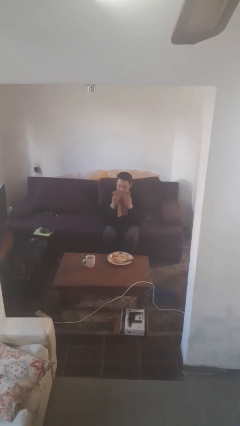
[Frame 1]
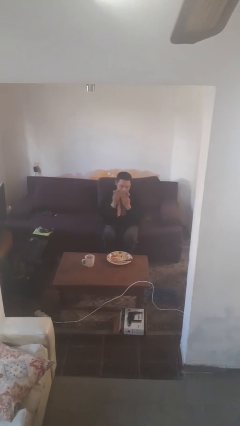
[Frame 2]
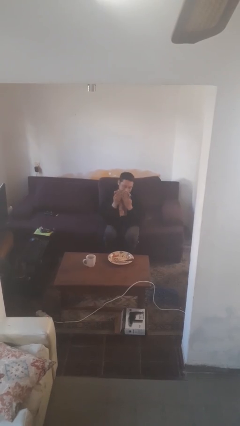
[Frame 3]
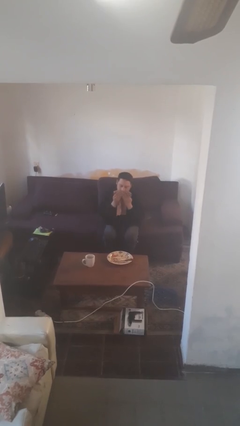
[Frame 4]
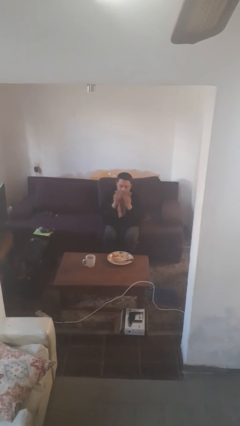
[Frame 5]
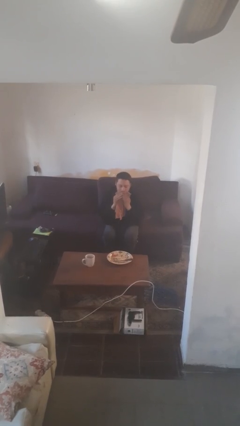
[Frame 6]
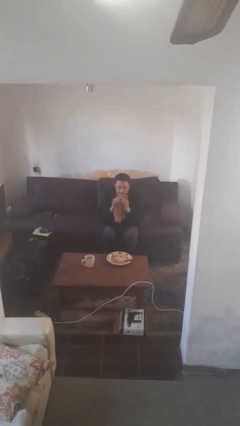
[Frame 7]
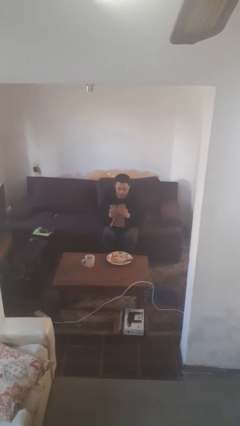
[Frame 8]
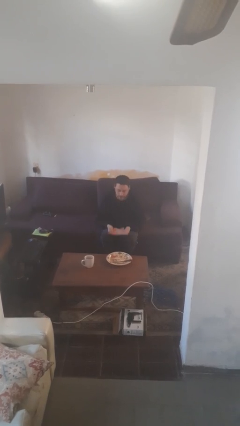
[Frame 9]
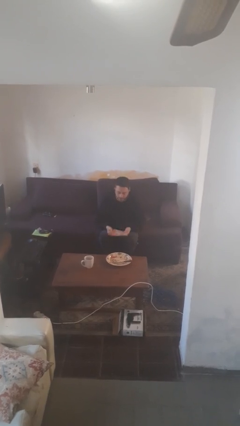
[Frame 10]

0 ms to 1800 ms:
person wipes mouth with napkin

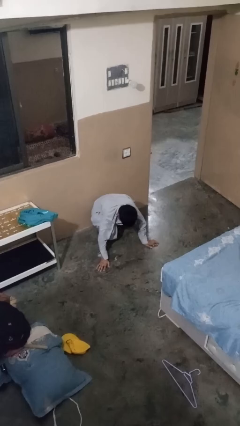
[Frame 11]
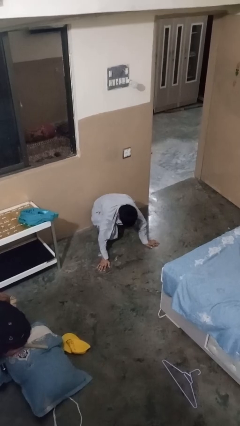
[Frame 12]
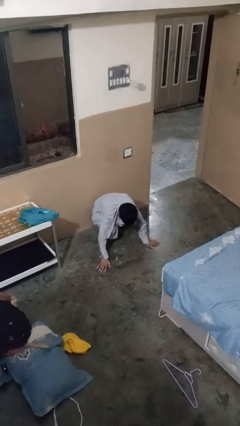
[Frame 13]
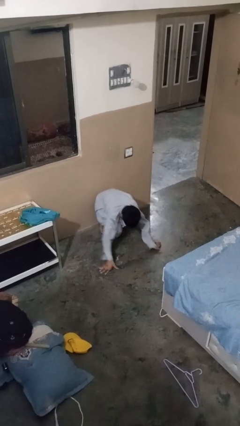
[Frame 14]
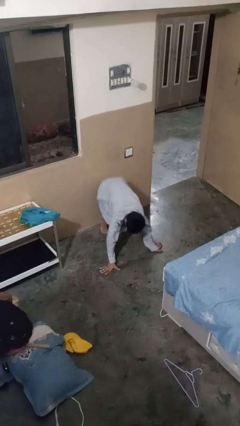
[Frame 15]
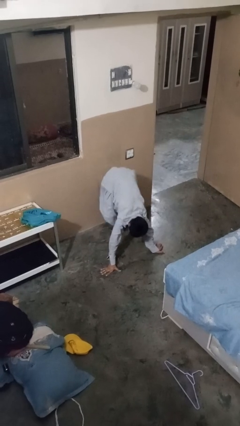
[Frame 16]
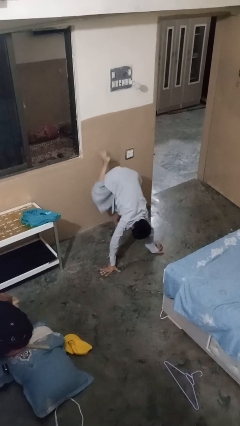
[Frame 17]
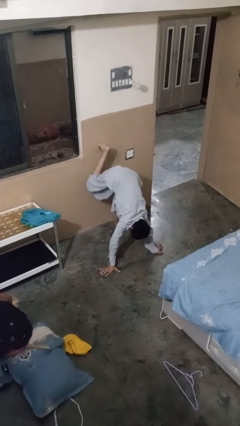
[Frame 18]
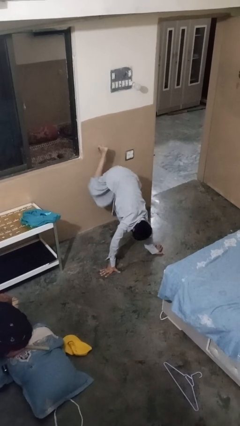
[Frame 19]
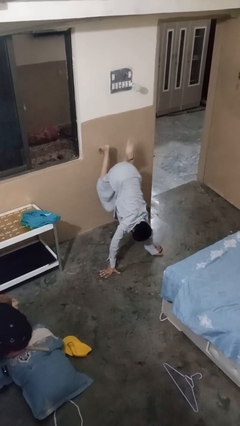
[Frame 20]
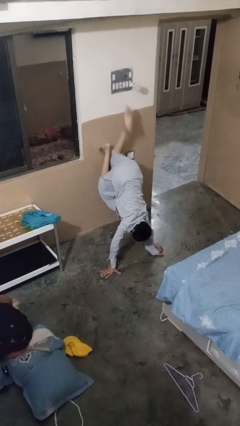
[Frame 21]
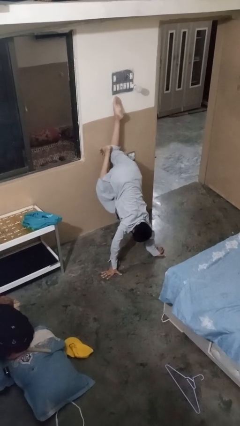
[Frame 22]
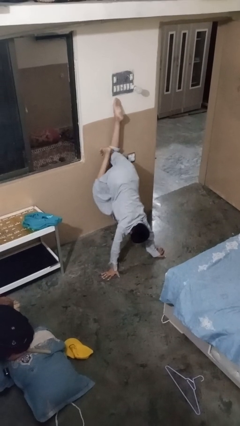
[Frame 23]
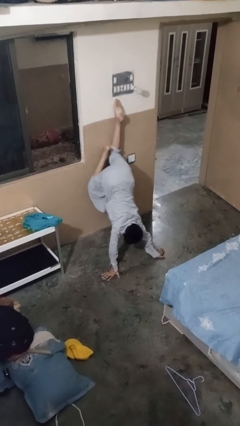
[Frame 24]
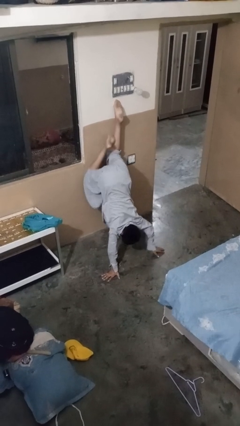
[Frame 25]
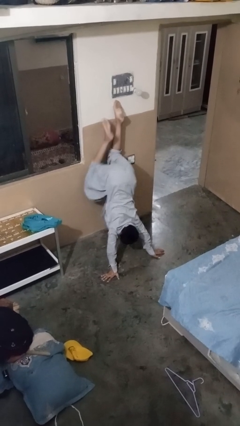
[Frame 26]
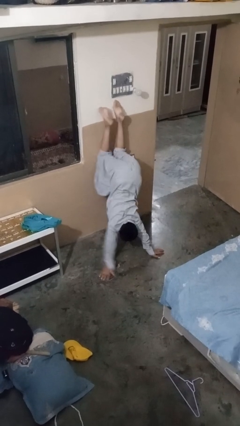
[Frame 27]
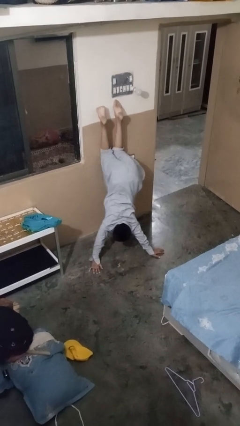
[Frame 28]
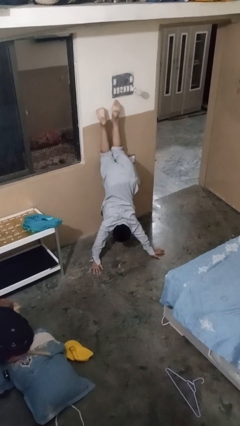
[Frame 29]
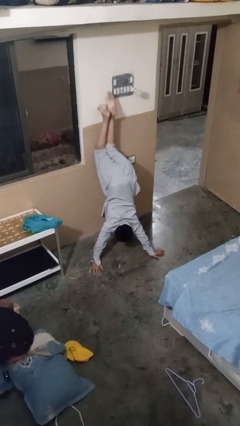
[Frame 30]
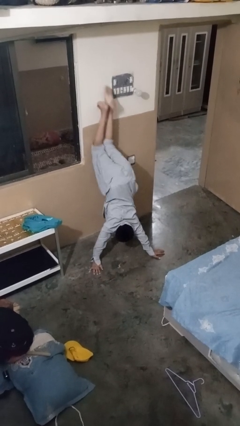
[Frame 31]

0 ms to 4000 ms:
person handstand

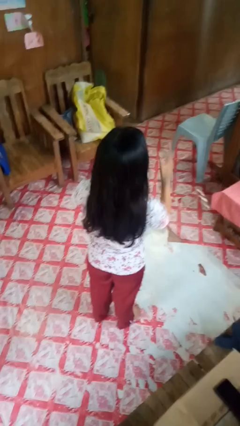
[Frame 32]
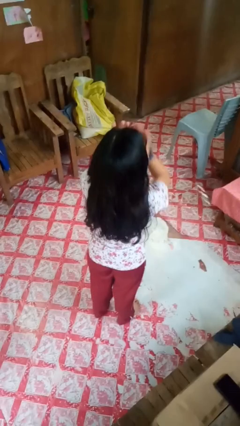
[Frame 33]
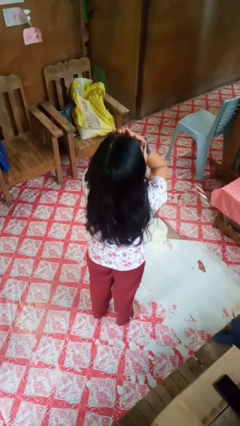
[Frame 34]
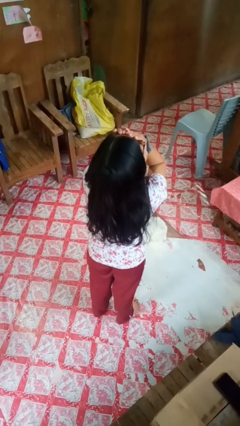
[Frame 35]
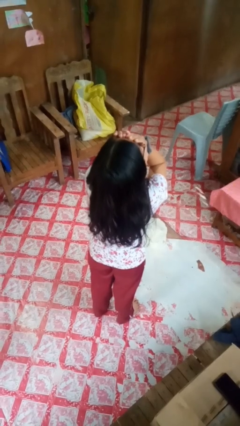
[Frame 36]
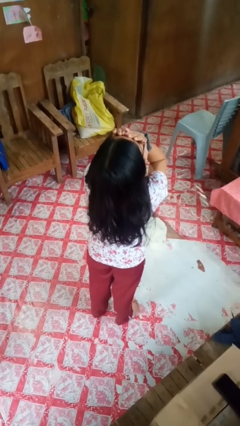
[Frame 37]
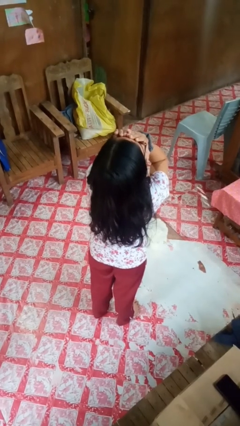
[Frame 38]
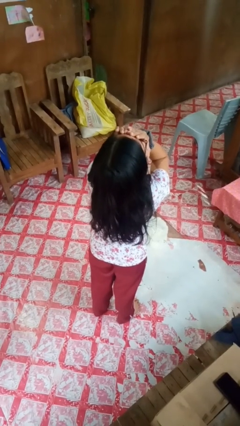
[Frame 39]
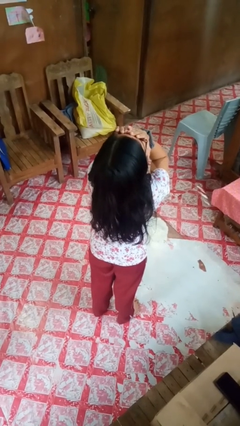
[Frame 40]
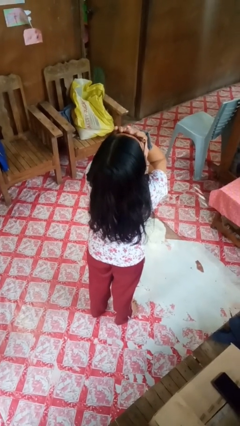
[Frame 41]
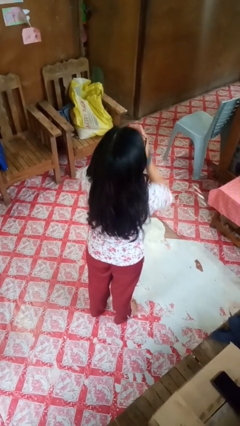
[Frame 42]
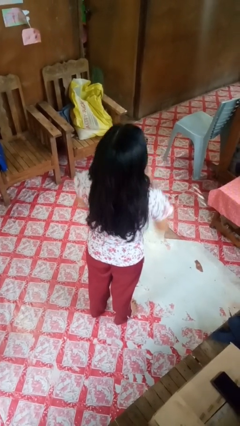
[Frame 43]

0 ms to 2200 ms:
person covers face with hands

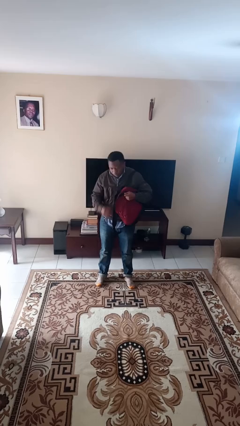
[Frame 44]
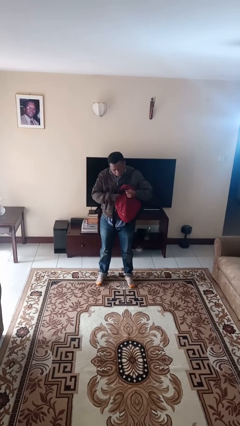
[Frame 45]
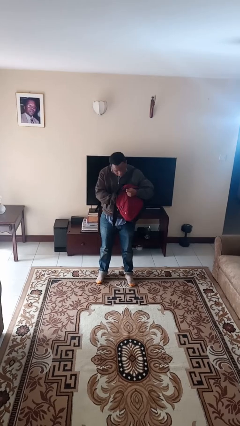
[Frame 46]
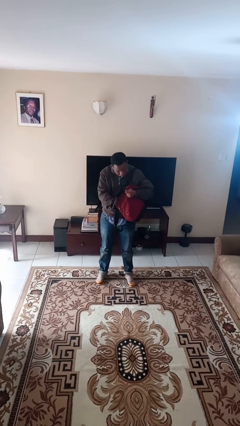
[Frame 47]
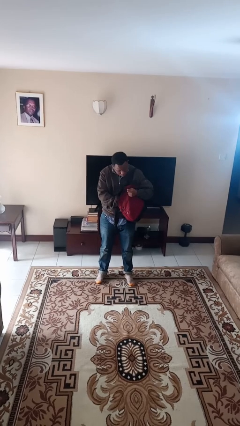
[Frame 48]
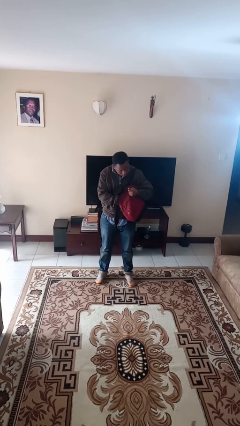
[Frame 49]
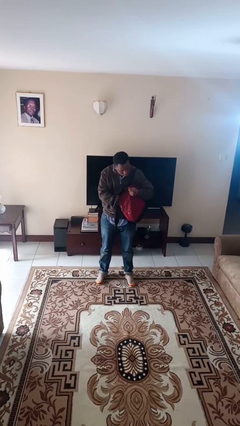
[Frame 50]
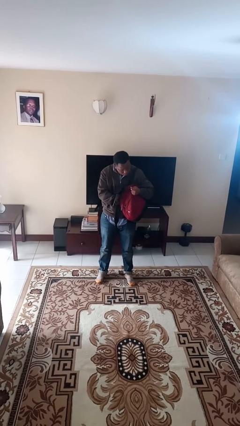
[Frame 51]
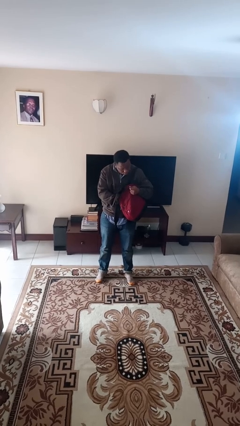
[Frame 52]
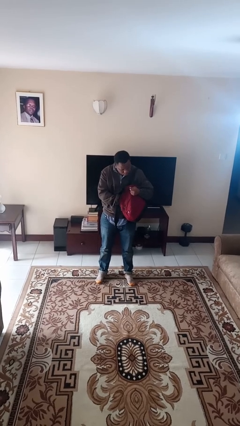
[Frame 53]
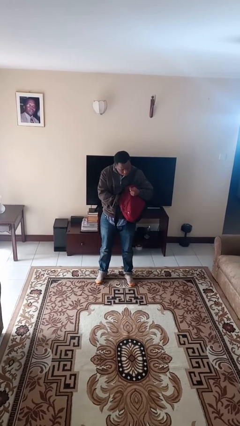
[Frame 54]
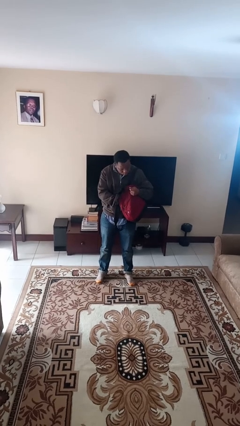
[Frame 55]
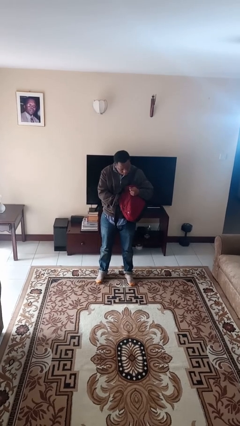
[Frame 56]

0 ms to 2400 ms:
person searches in backpack

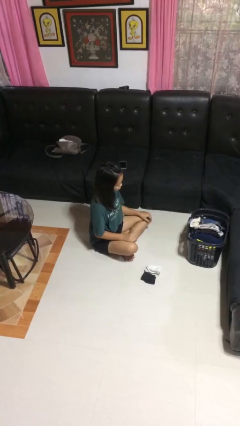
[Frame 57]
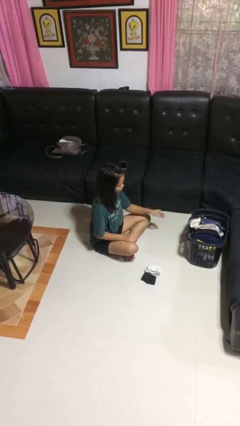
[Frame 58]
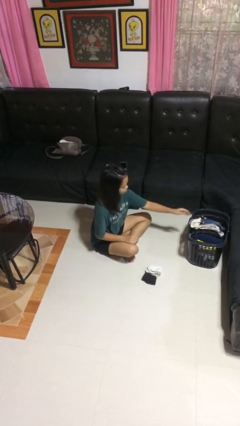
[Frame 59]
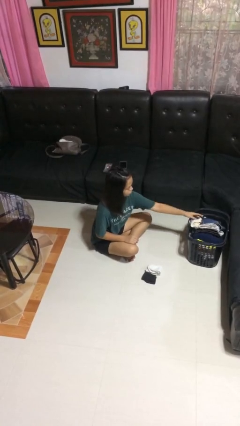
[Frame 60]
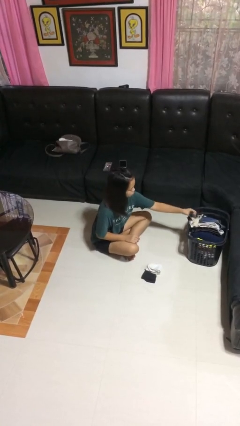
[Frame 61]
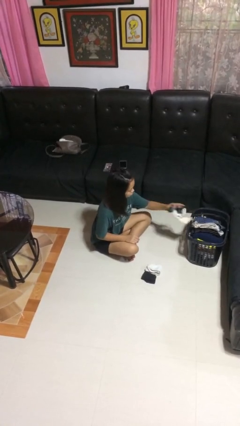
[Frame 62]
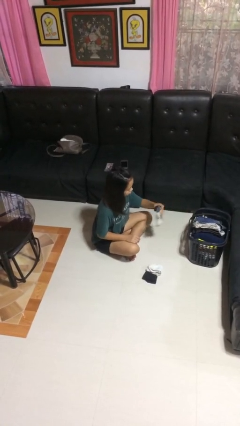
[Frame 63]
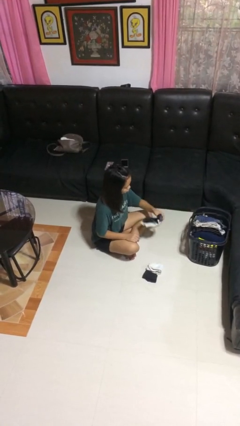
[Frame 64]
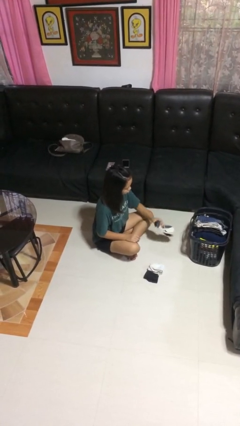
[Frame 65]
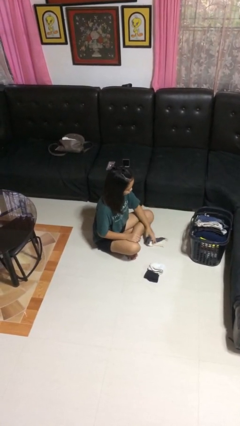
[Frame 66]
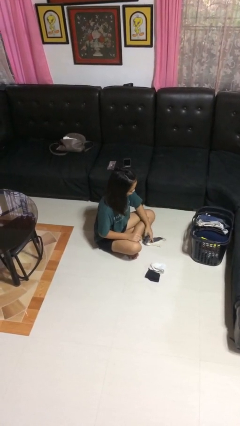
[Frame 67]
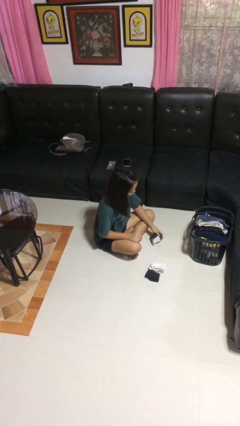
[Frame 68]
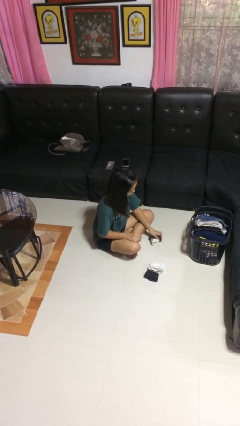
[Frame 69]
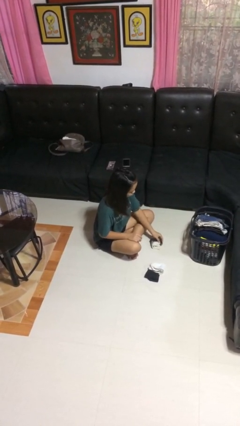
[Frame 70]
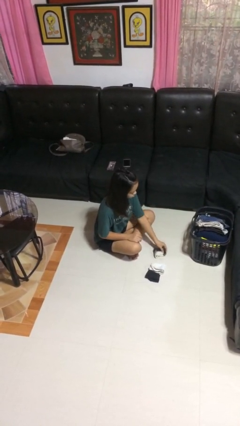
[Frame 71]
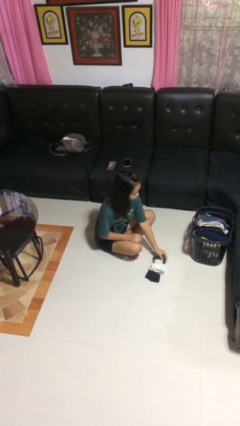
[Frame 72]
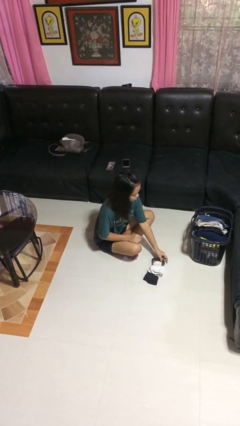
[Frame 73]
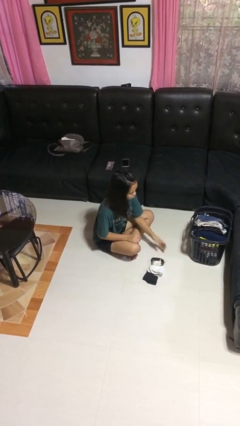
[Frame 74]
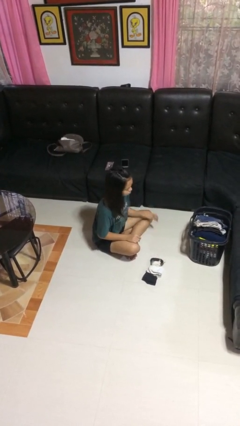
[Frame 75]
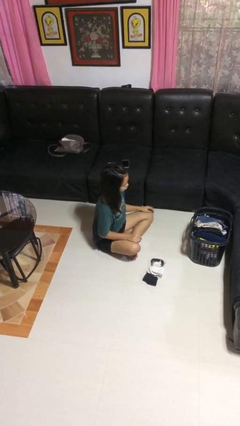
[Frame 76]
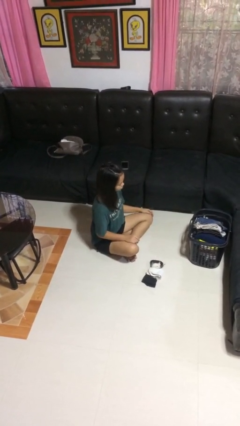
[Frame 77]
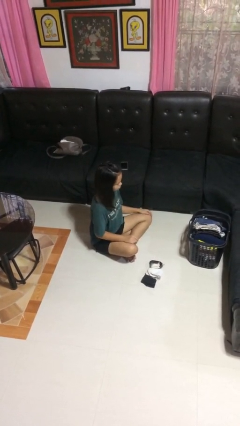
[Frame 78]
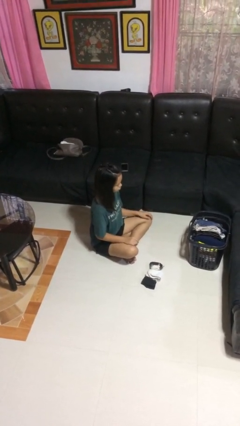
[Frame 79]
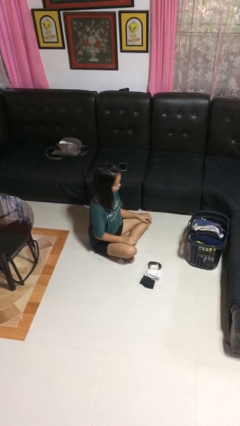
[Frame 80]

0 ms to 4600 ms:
person folds socks

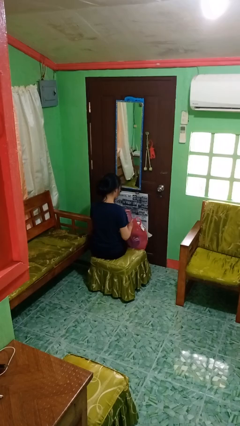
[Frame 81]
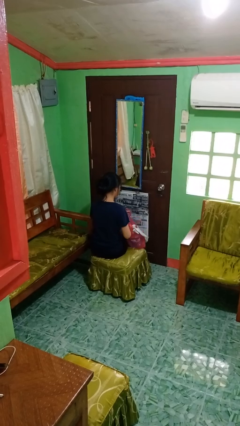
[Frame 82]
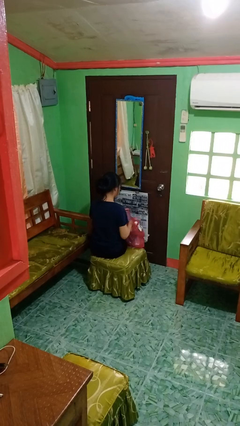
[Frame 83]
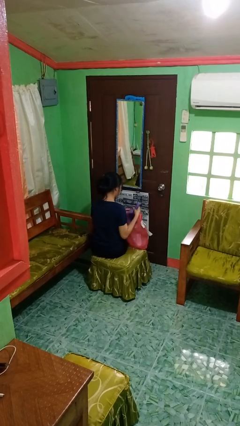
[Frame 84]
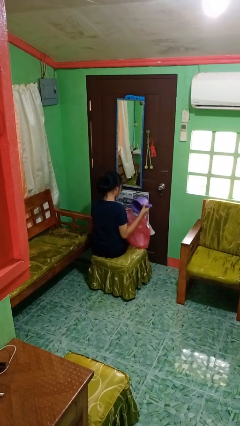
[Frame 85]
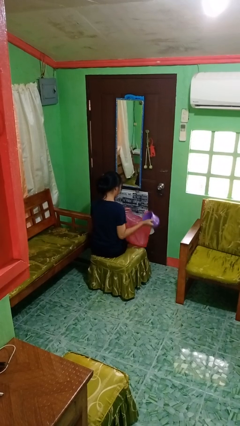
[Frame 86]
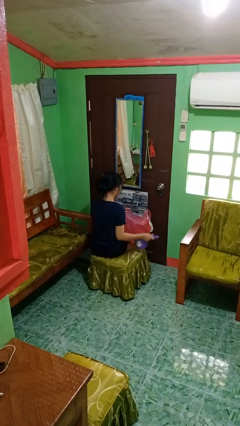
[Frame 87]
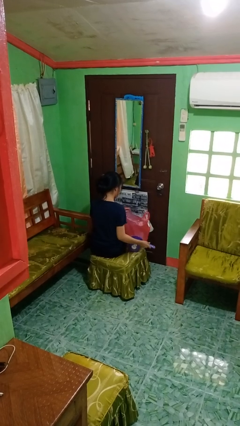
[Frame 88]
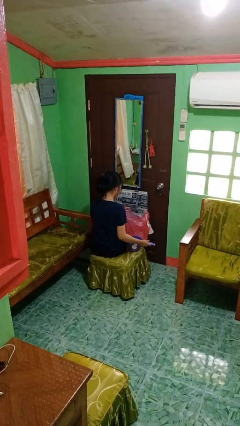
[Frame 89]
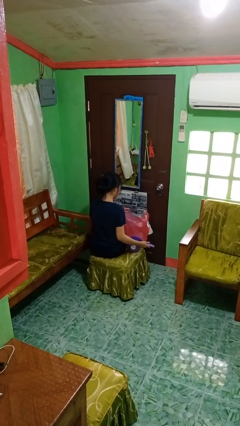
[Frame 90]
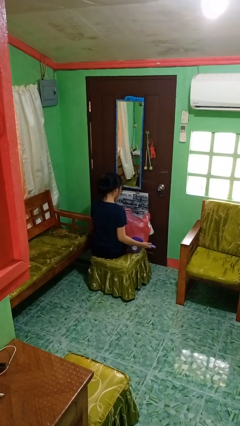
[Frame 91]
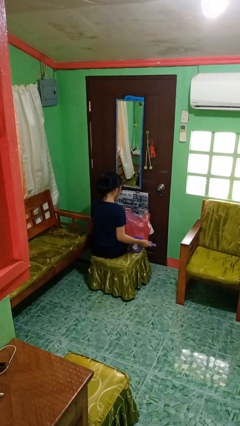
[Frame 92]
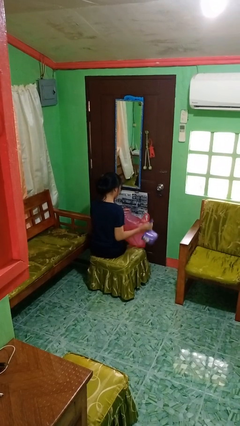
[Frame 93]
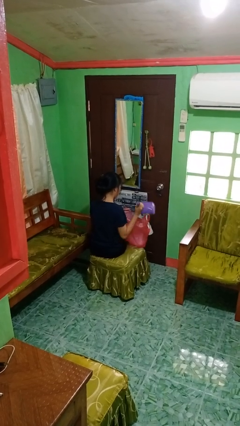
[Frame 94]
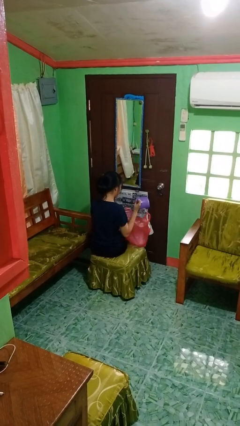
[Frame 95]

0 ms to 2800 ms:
person takes object from bag
